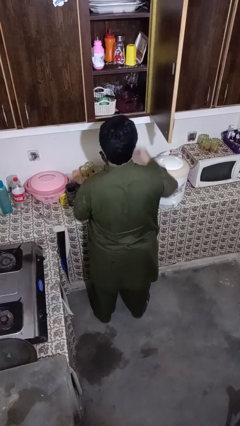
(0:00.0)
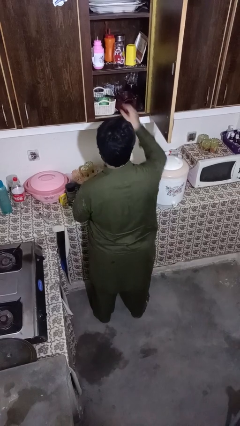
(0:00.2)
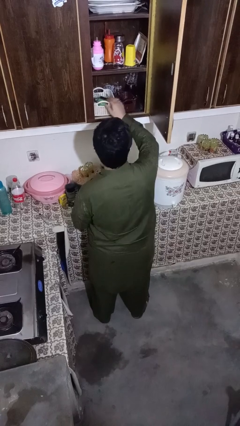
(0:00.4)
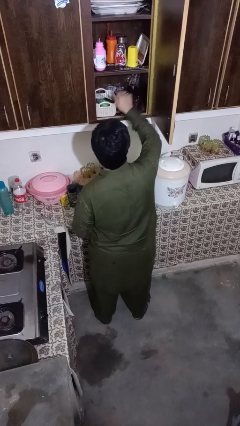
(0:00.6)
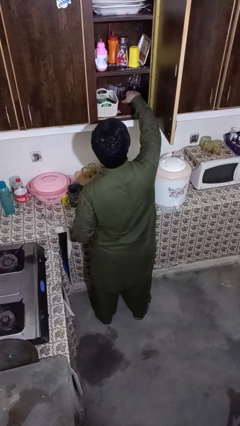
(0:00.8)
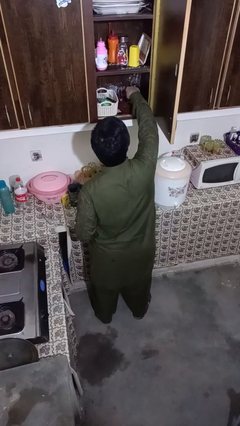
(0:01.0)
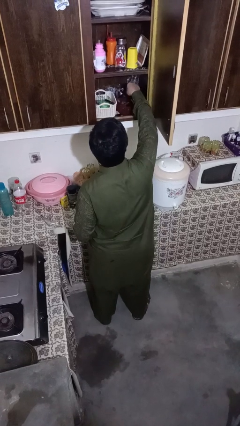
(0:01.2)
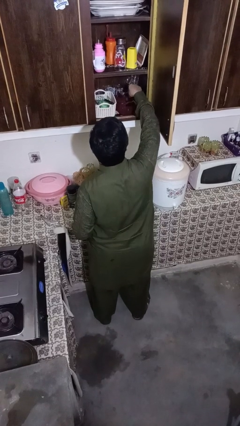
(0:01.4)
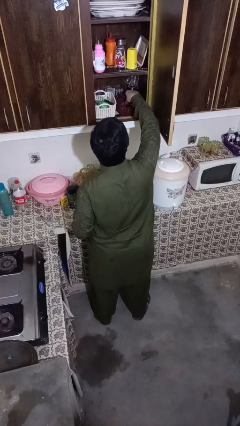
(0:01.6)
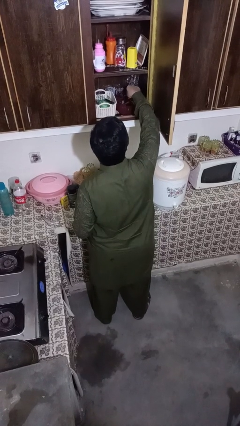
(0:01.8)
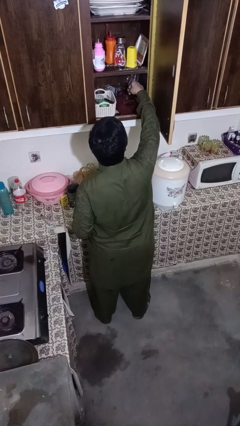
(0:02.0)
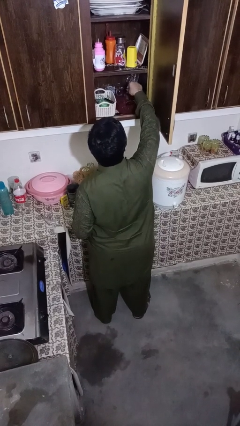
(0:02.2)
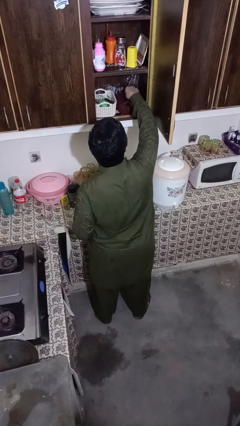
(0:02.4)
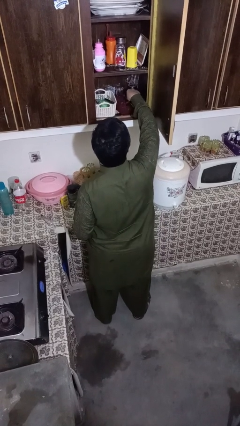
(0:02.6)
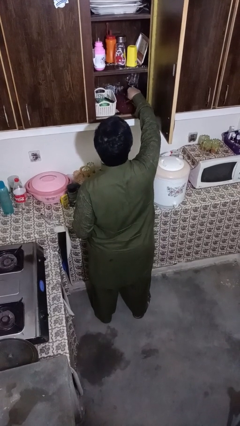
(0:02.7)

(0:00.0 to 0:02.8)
person searches in kitchen drawer

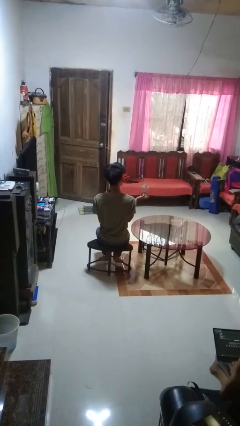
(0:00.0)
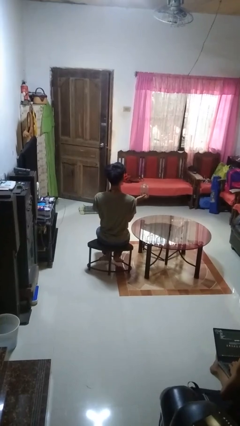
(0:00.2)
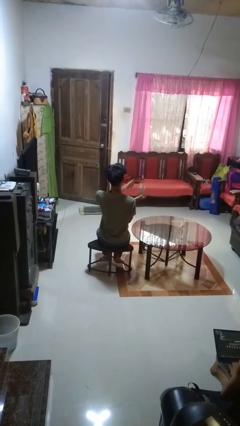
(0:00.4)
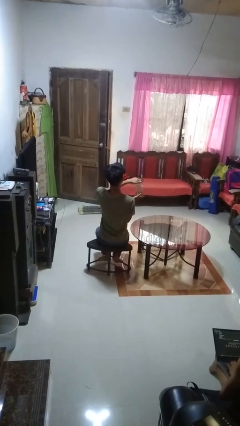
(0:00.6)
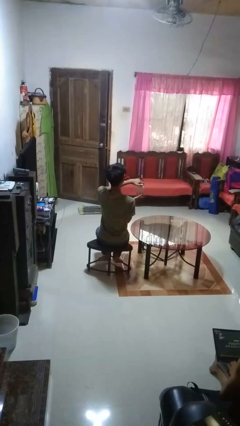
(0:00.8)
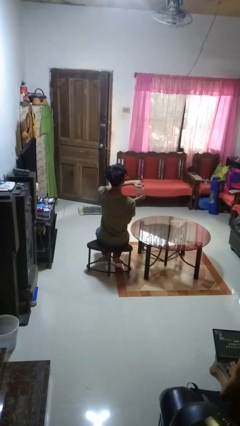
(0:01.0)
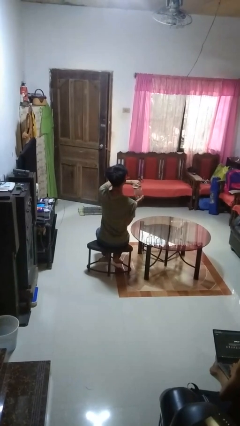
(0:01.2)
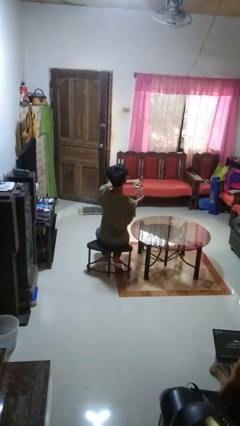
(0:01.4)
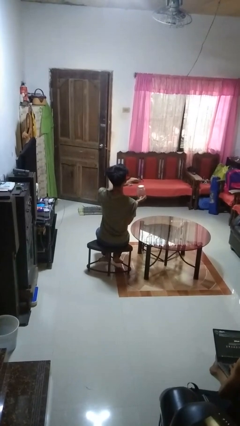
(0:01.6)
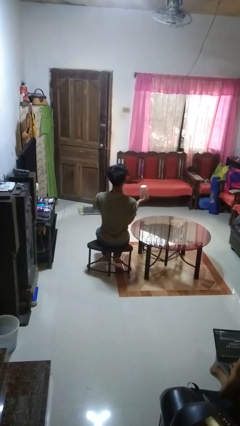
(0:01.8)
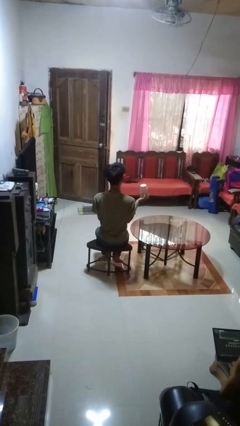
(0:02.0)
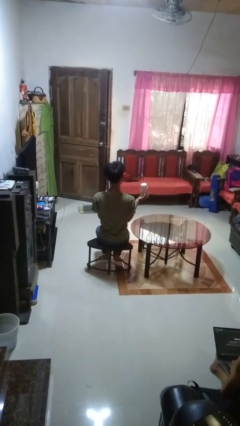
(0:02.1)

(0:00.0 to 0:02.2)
person closes jar

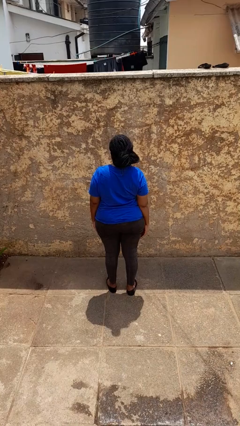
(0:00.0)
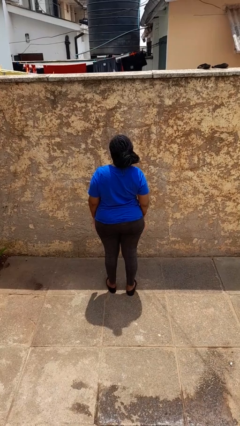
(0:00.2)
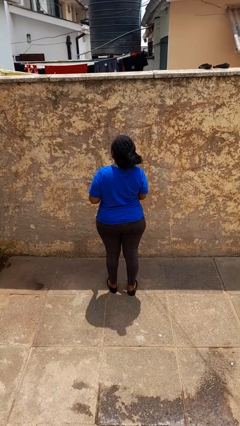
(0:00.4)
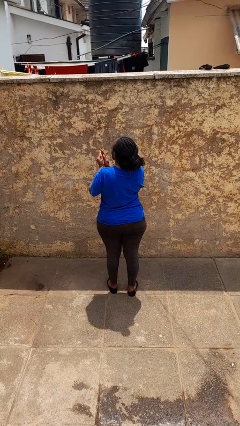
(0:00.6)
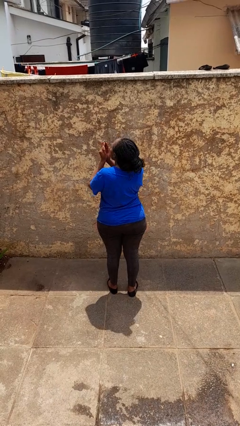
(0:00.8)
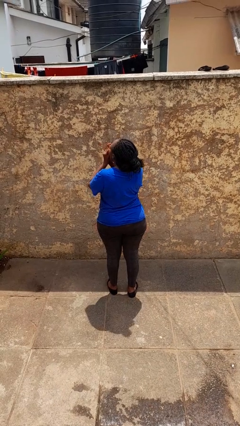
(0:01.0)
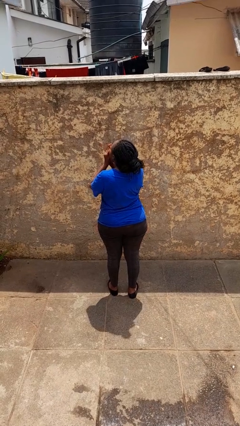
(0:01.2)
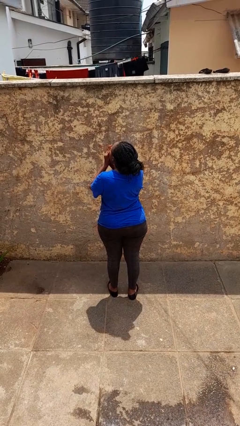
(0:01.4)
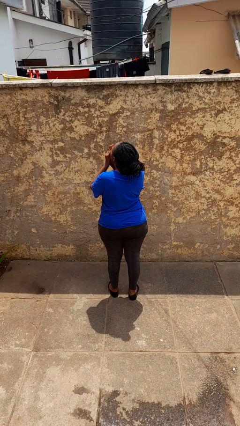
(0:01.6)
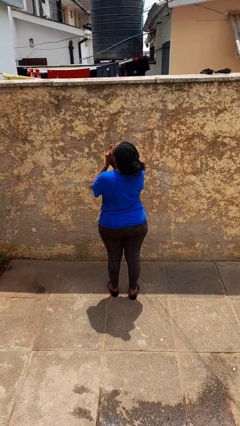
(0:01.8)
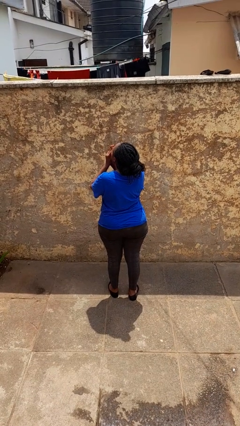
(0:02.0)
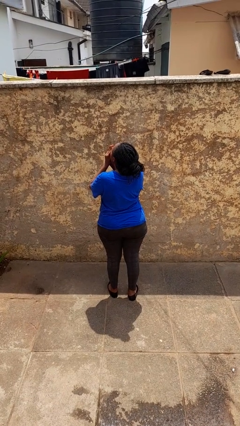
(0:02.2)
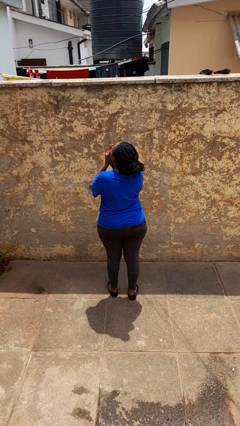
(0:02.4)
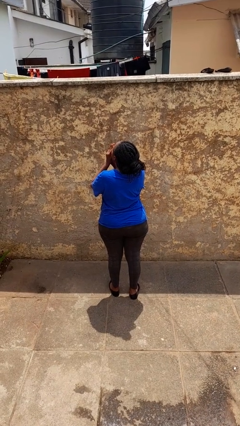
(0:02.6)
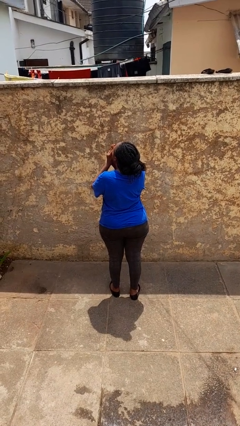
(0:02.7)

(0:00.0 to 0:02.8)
person blows into hands

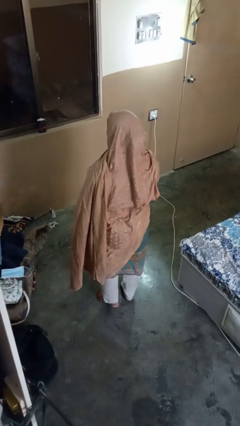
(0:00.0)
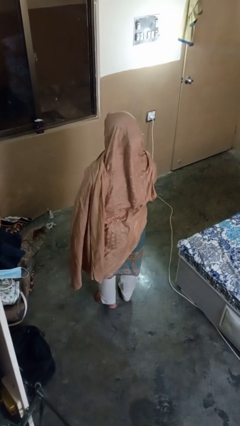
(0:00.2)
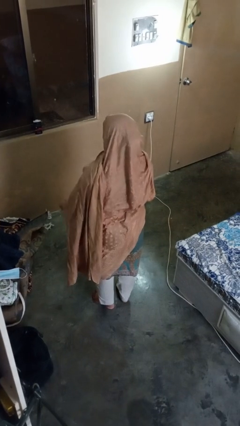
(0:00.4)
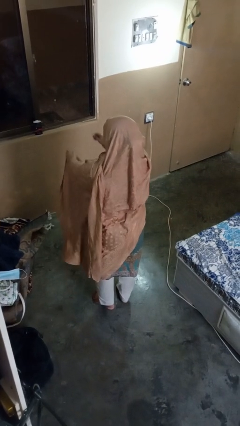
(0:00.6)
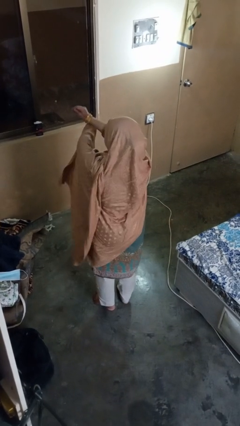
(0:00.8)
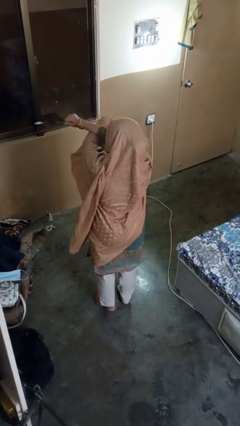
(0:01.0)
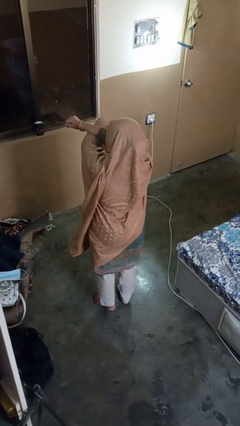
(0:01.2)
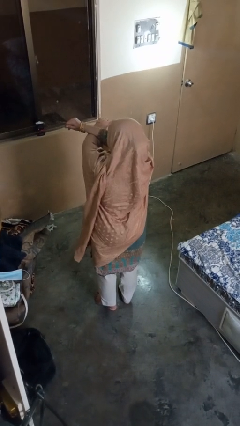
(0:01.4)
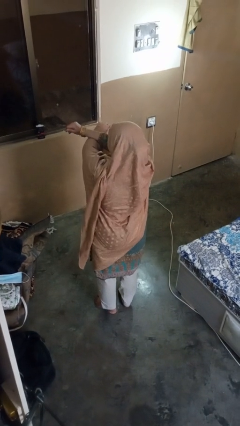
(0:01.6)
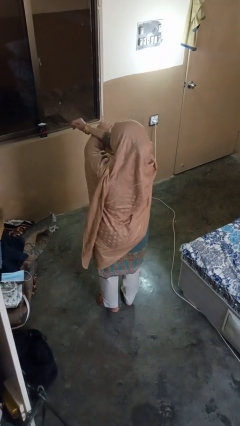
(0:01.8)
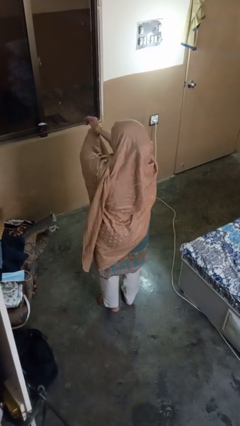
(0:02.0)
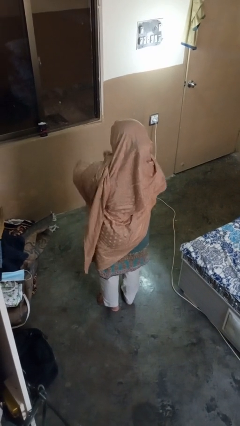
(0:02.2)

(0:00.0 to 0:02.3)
person crosses arms

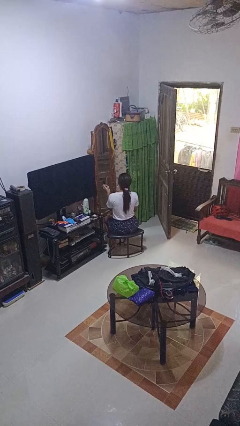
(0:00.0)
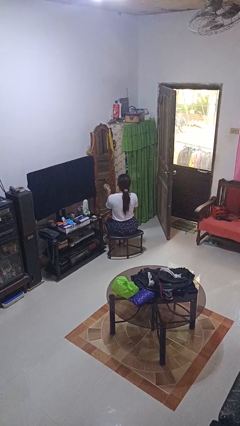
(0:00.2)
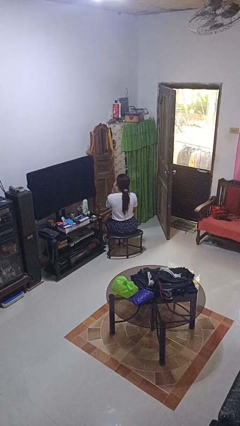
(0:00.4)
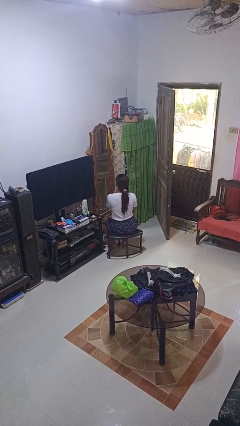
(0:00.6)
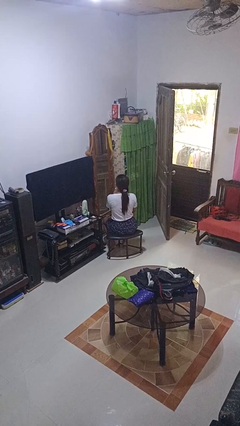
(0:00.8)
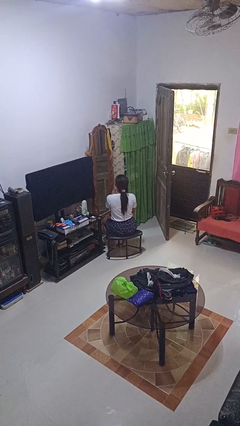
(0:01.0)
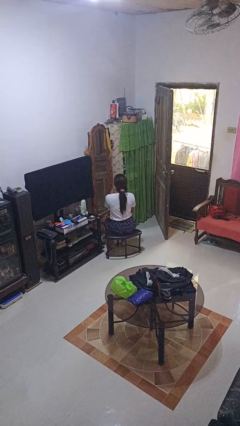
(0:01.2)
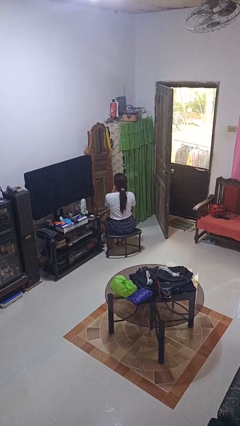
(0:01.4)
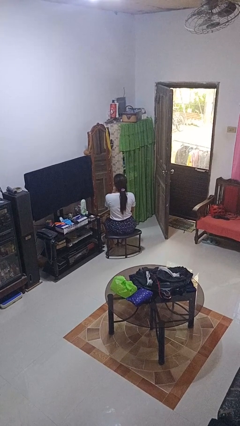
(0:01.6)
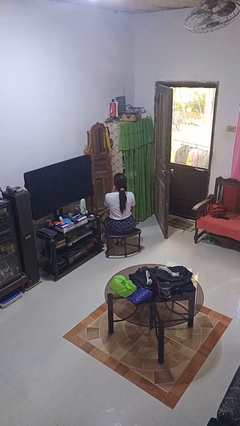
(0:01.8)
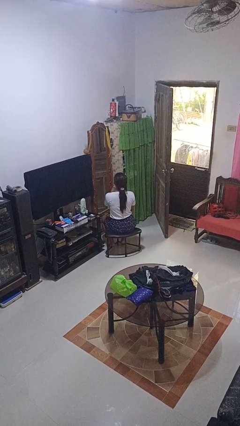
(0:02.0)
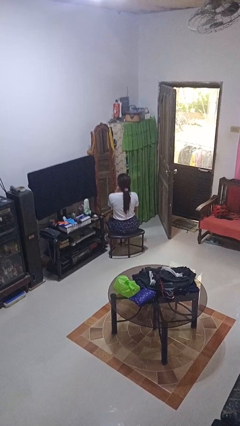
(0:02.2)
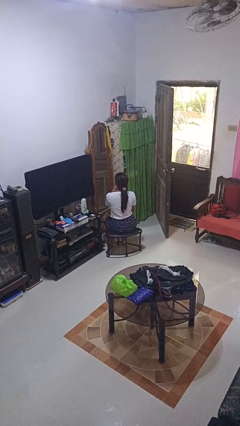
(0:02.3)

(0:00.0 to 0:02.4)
person applies lip makeup

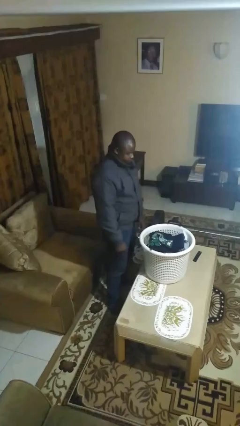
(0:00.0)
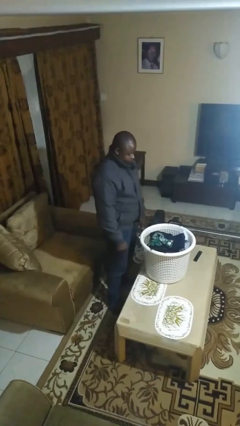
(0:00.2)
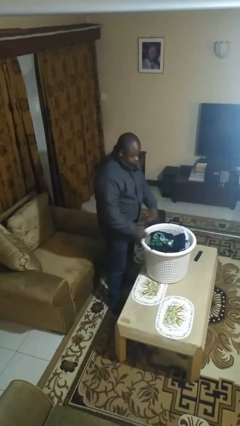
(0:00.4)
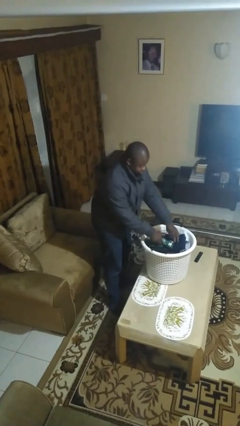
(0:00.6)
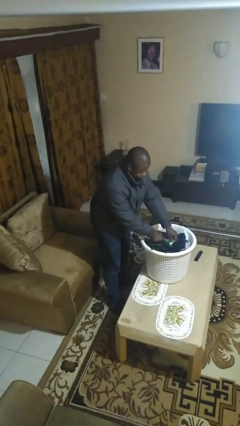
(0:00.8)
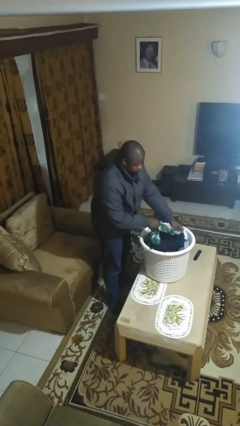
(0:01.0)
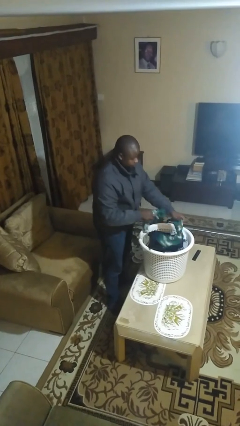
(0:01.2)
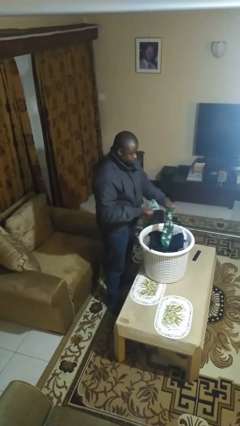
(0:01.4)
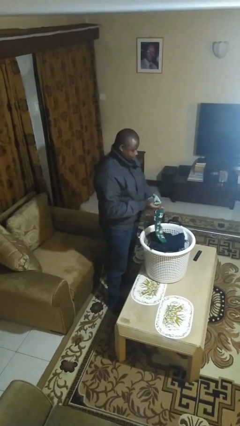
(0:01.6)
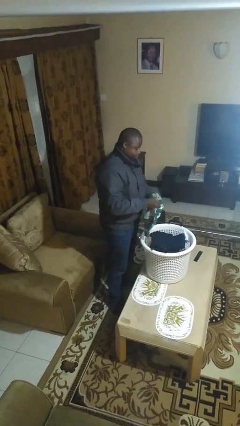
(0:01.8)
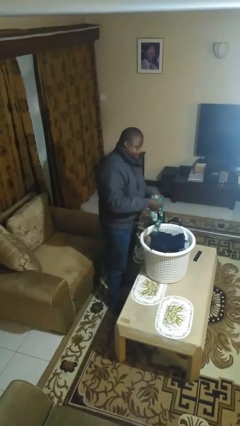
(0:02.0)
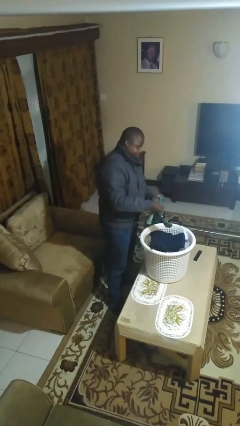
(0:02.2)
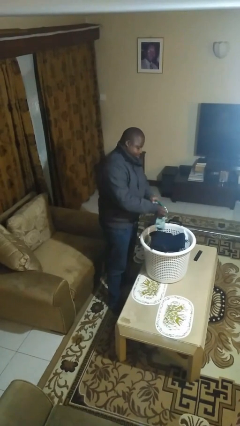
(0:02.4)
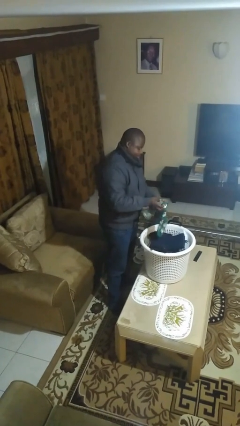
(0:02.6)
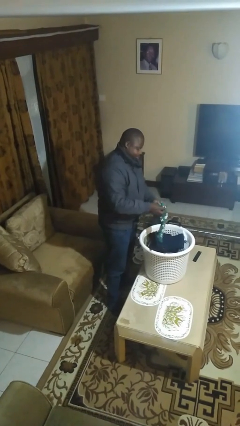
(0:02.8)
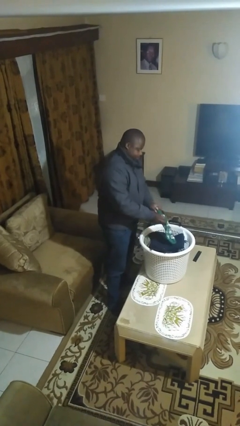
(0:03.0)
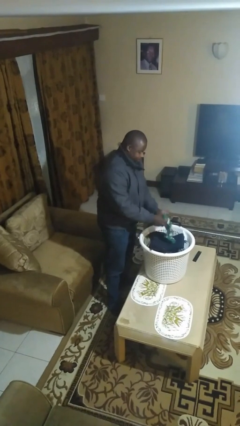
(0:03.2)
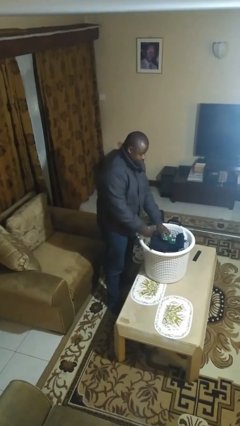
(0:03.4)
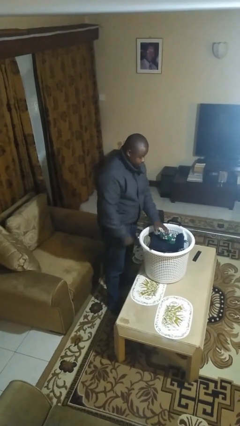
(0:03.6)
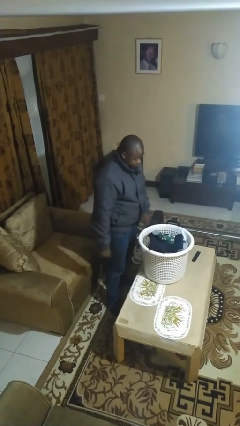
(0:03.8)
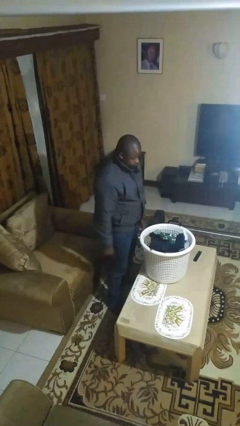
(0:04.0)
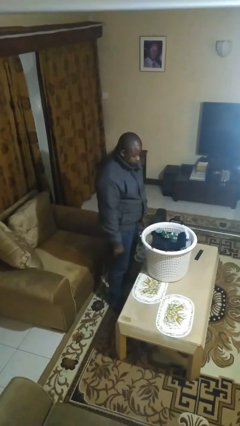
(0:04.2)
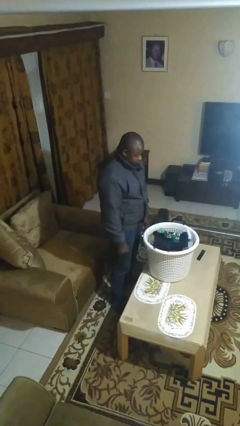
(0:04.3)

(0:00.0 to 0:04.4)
person folds socks

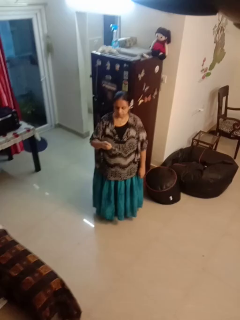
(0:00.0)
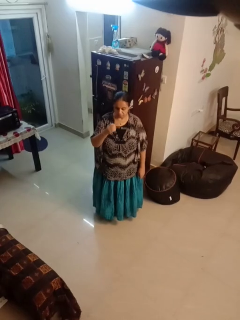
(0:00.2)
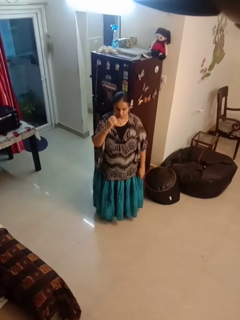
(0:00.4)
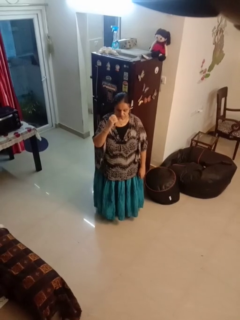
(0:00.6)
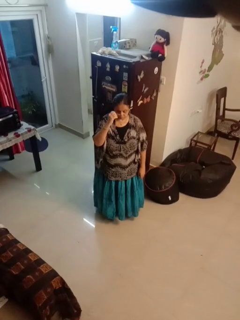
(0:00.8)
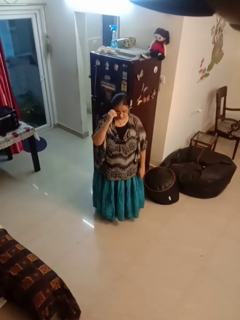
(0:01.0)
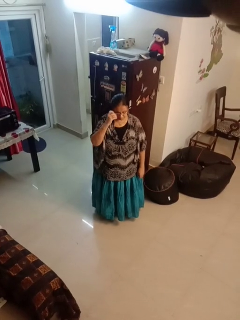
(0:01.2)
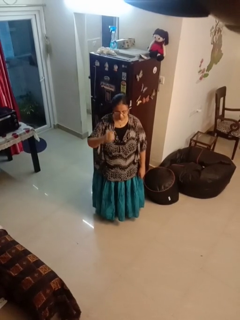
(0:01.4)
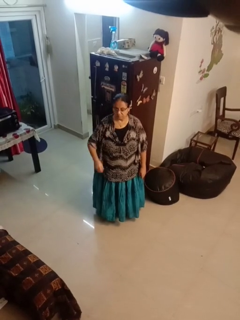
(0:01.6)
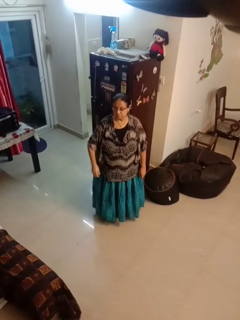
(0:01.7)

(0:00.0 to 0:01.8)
person puts on glasses
